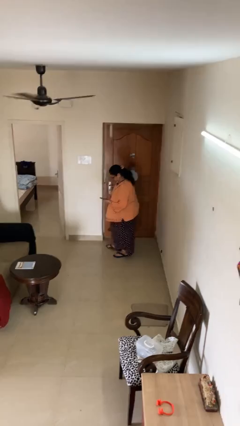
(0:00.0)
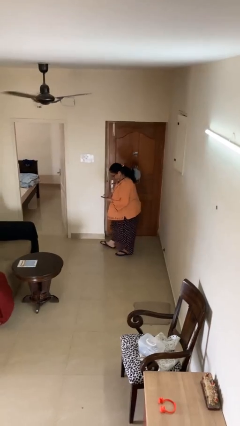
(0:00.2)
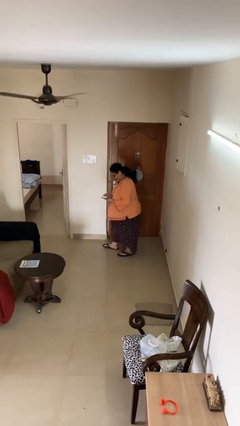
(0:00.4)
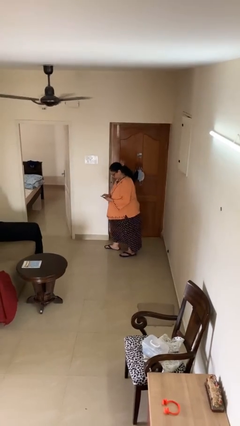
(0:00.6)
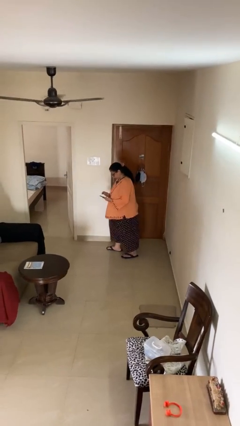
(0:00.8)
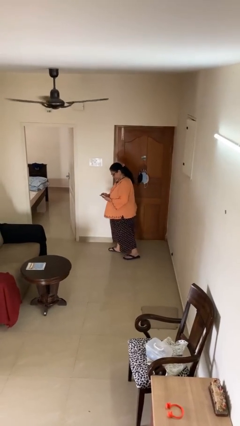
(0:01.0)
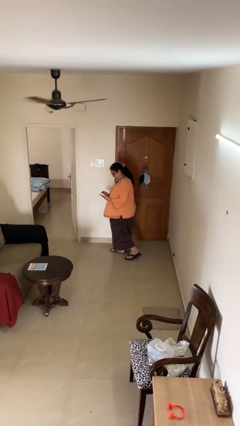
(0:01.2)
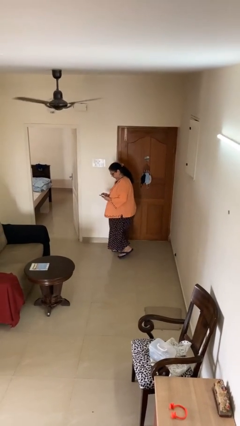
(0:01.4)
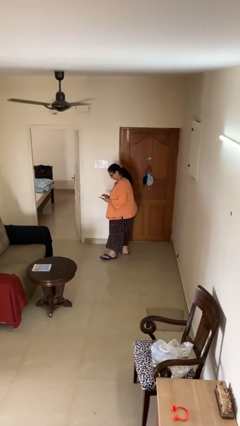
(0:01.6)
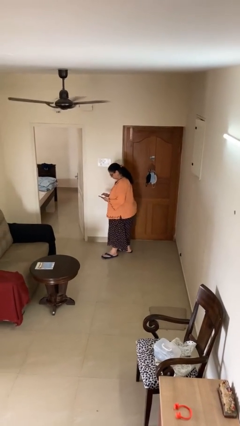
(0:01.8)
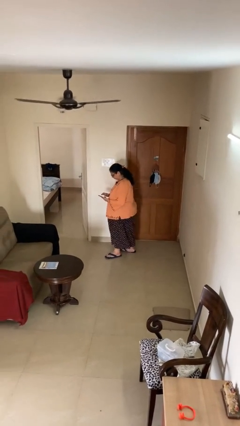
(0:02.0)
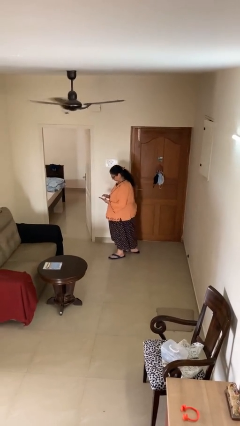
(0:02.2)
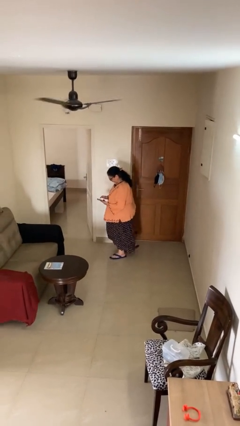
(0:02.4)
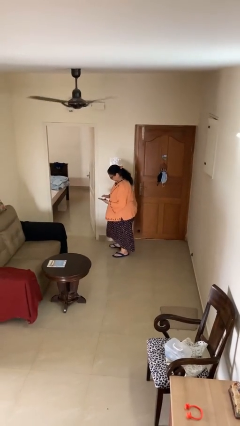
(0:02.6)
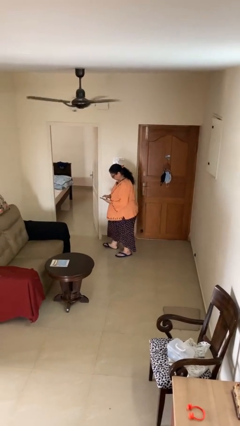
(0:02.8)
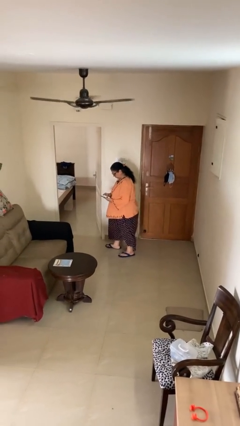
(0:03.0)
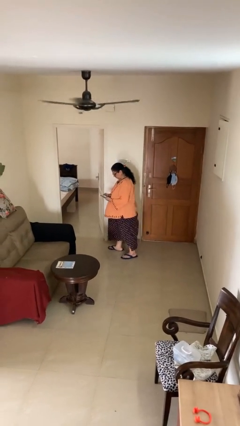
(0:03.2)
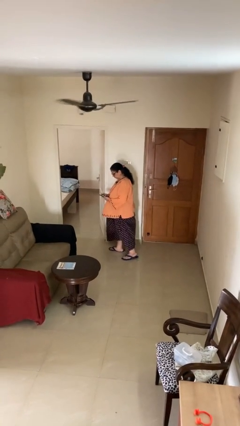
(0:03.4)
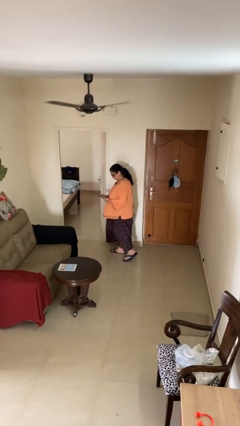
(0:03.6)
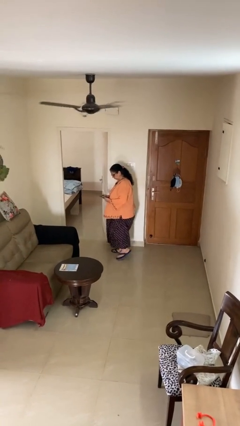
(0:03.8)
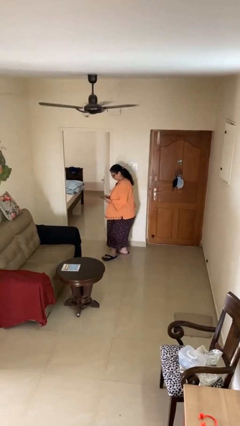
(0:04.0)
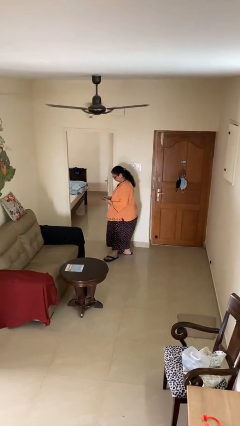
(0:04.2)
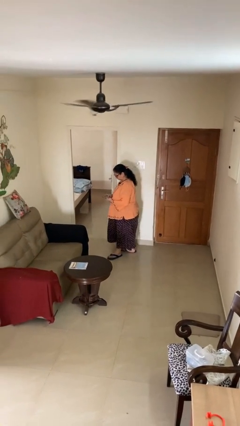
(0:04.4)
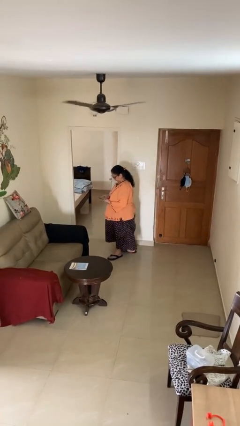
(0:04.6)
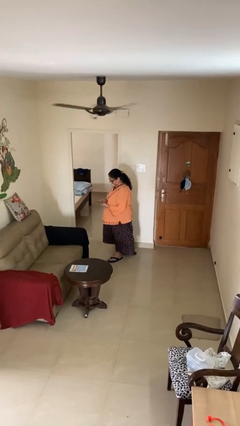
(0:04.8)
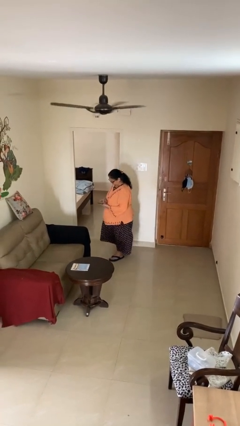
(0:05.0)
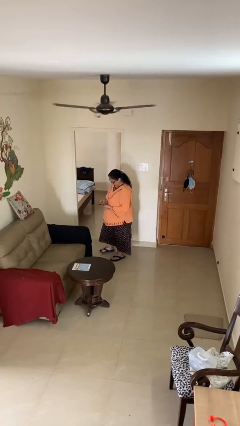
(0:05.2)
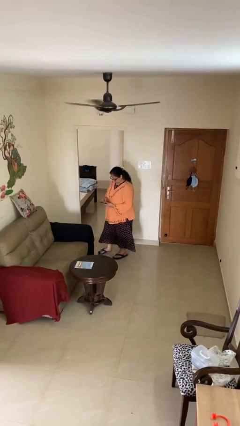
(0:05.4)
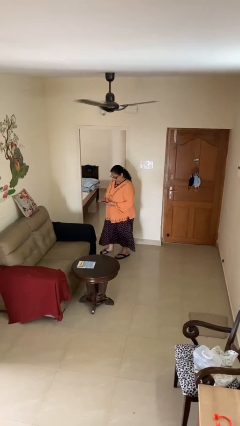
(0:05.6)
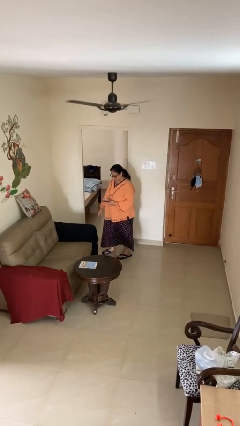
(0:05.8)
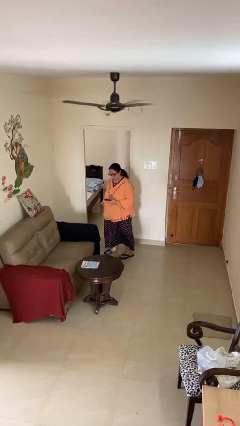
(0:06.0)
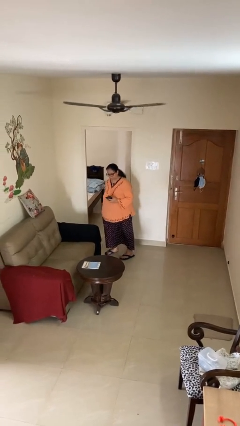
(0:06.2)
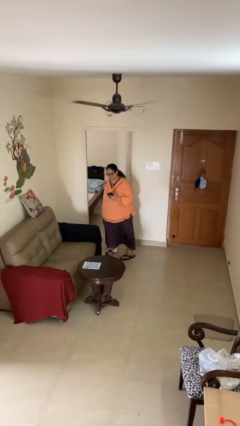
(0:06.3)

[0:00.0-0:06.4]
person texts on phone

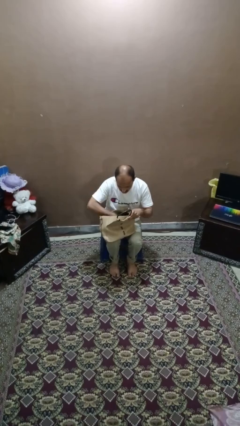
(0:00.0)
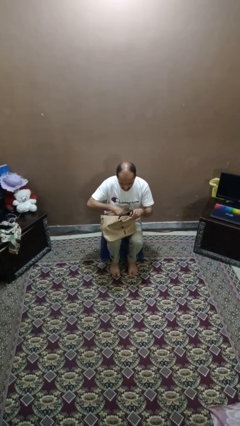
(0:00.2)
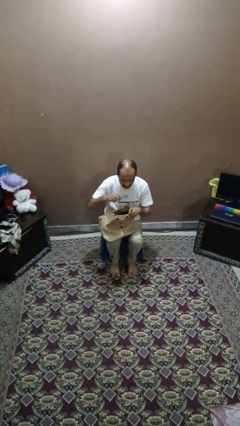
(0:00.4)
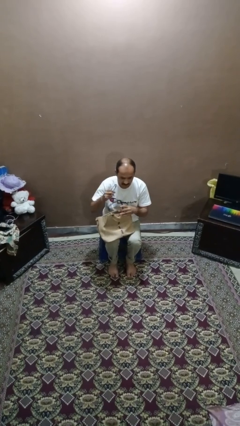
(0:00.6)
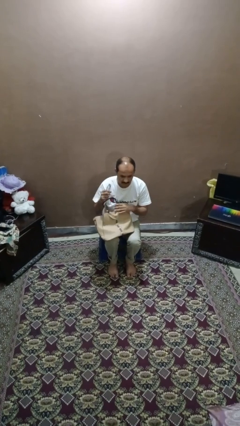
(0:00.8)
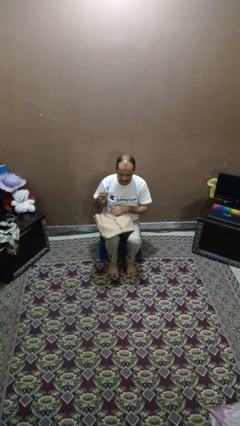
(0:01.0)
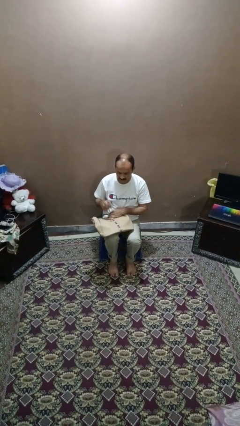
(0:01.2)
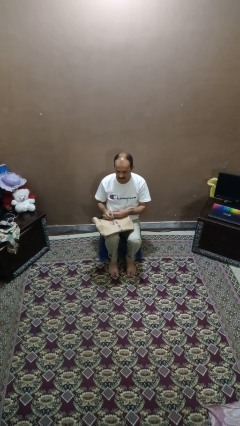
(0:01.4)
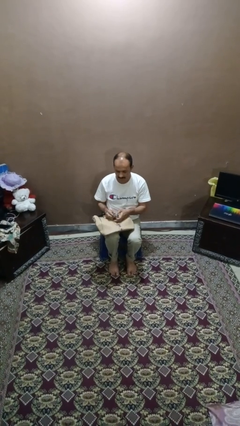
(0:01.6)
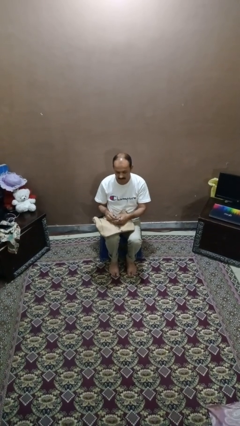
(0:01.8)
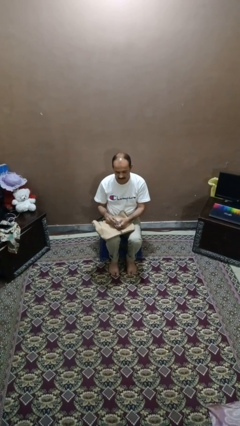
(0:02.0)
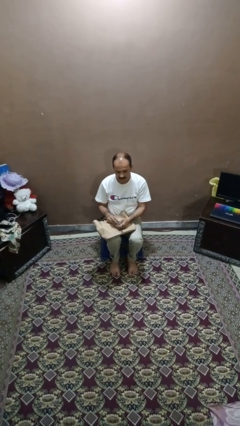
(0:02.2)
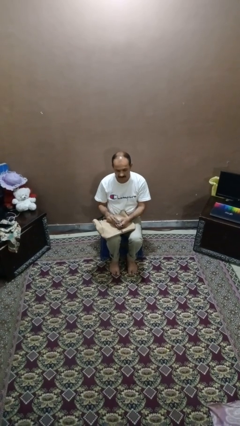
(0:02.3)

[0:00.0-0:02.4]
person takes object from purse

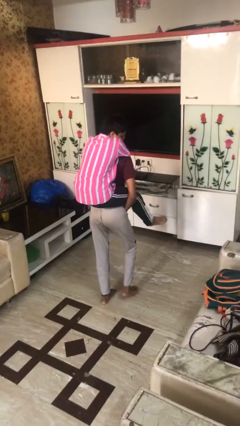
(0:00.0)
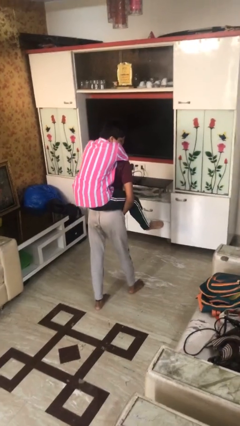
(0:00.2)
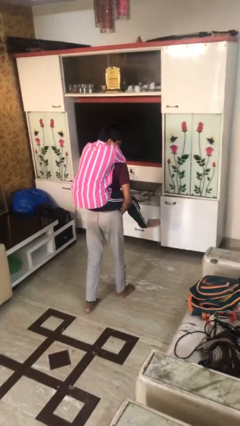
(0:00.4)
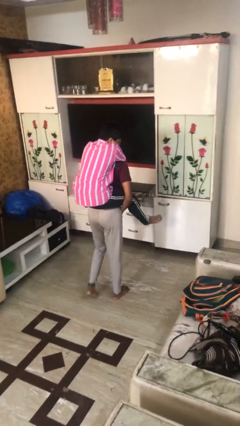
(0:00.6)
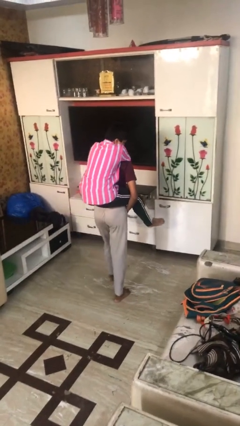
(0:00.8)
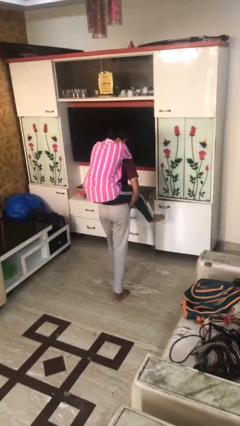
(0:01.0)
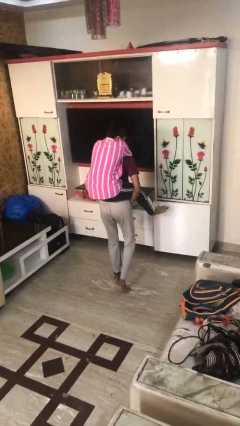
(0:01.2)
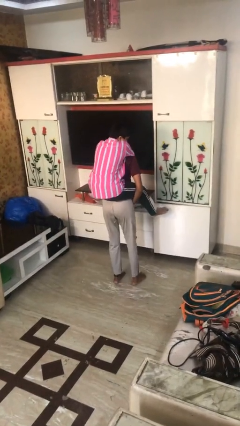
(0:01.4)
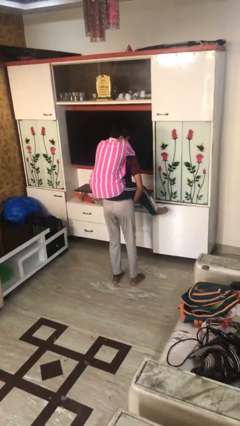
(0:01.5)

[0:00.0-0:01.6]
person carries person on back

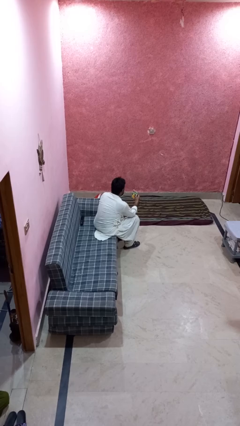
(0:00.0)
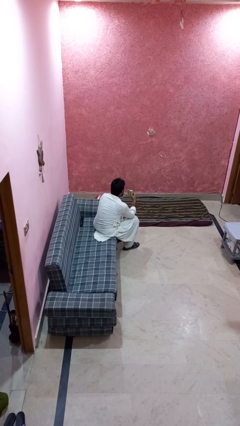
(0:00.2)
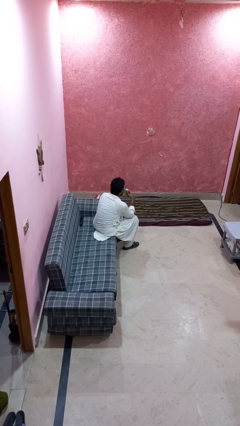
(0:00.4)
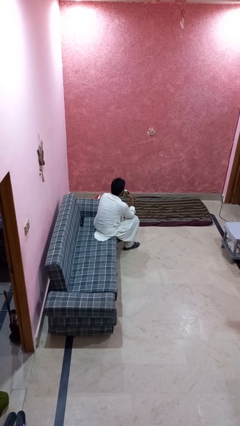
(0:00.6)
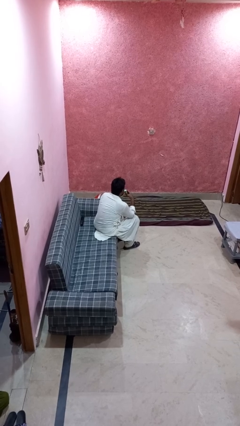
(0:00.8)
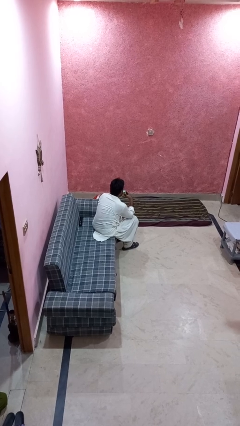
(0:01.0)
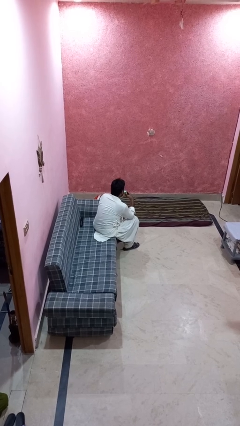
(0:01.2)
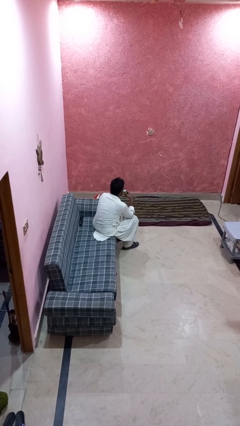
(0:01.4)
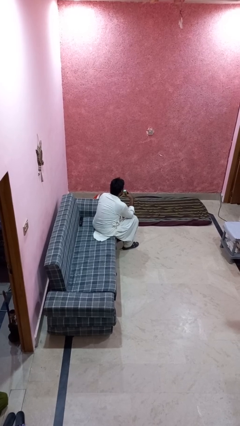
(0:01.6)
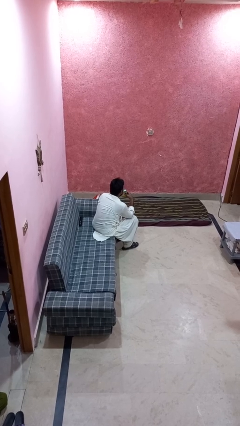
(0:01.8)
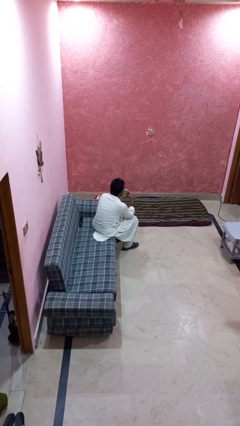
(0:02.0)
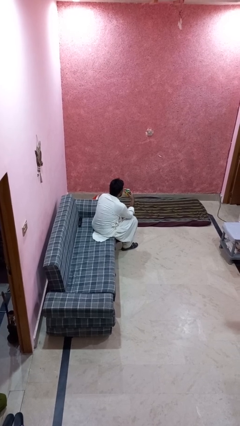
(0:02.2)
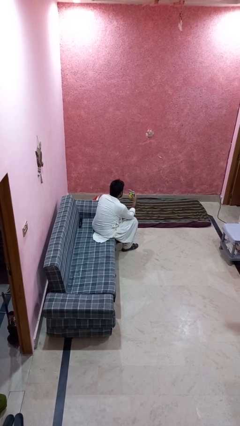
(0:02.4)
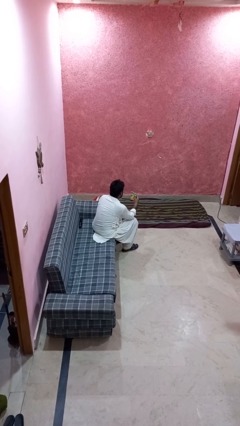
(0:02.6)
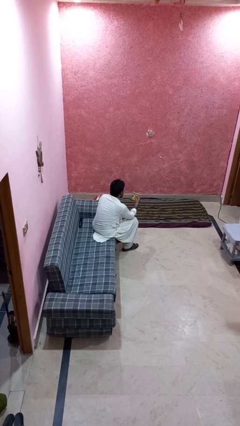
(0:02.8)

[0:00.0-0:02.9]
person drinks from straw

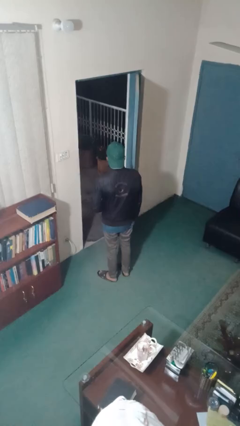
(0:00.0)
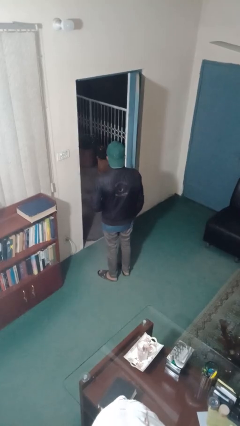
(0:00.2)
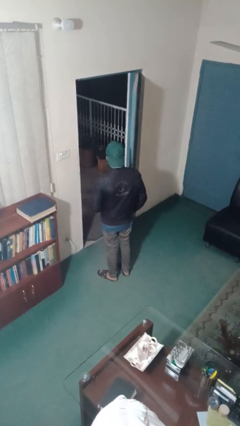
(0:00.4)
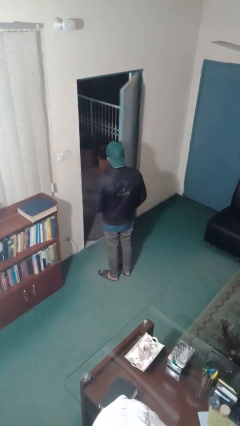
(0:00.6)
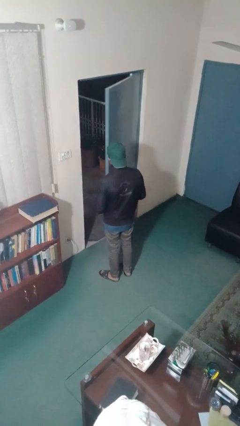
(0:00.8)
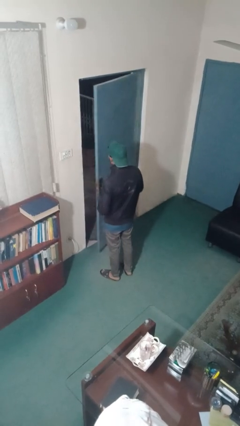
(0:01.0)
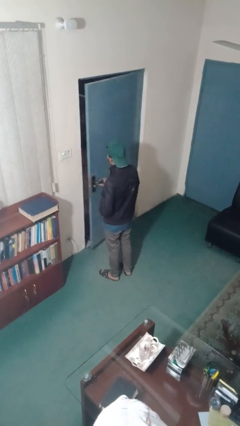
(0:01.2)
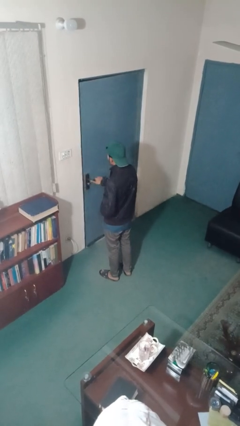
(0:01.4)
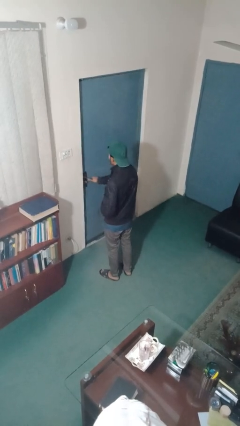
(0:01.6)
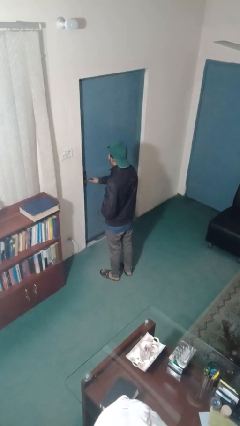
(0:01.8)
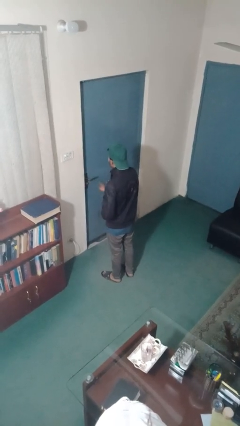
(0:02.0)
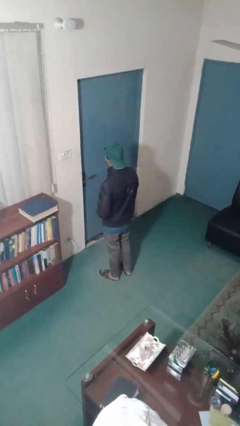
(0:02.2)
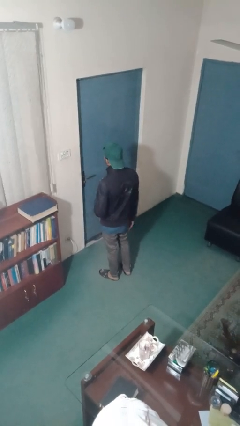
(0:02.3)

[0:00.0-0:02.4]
person closes facility door

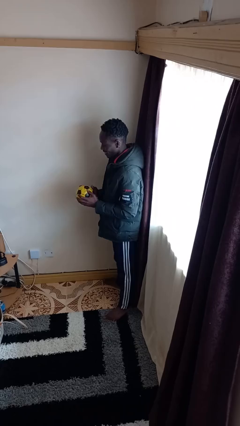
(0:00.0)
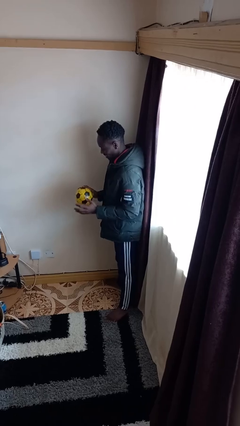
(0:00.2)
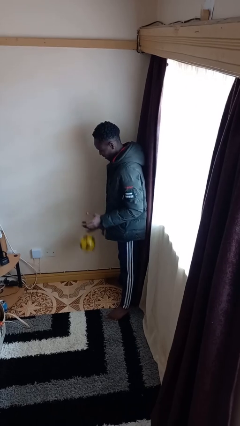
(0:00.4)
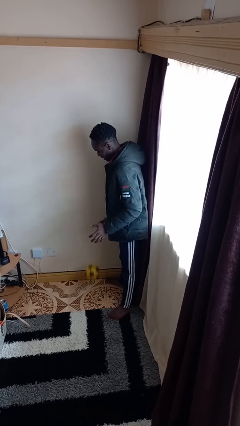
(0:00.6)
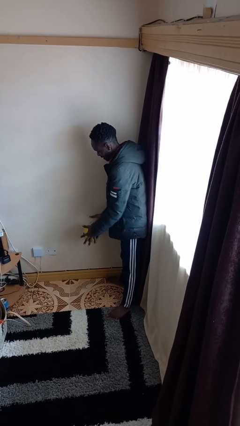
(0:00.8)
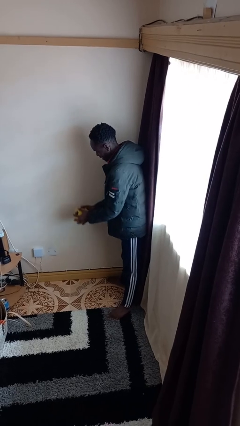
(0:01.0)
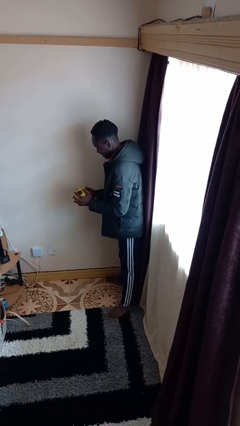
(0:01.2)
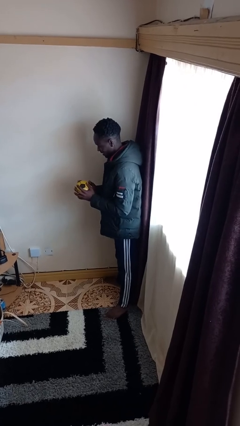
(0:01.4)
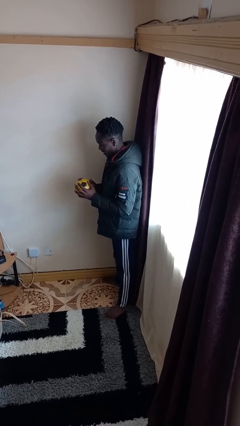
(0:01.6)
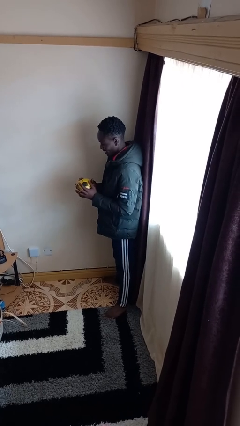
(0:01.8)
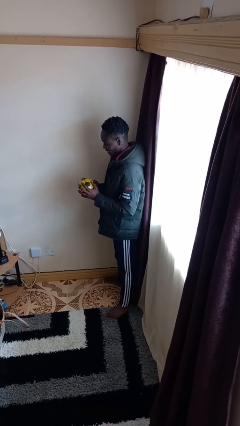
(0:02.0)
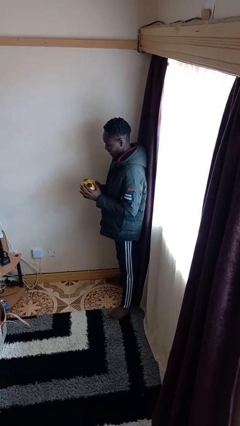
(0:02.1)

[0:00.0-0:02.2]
person bounces ball on floor
